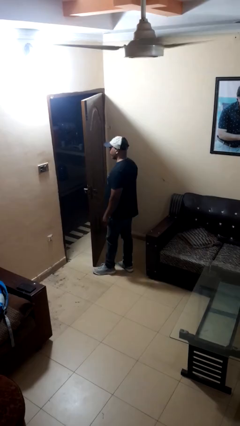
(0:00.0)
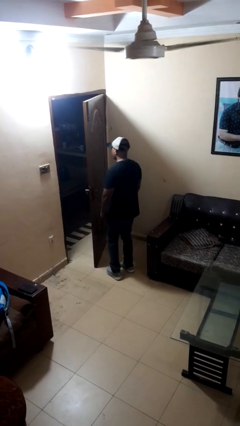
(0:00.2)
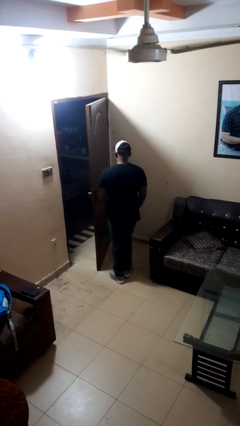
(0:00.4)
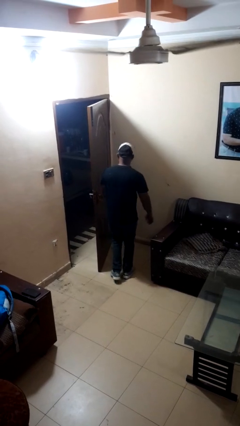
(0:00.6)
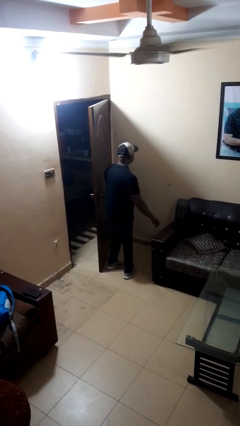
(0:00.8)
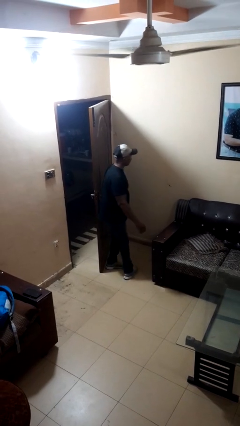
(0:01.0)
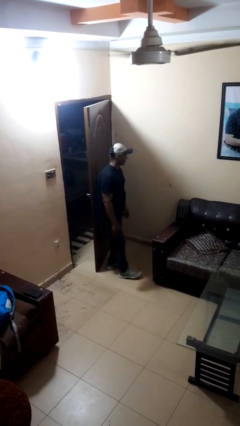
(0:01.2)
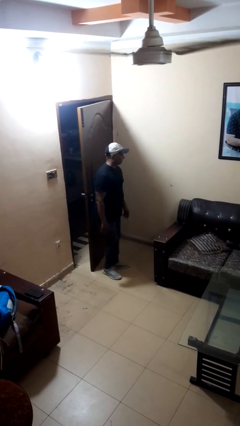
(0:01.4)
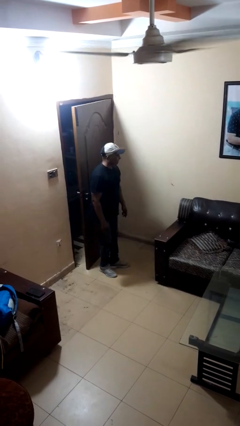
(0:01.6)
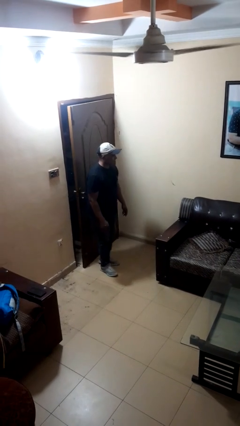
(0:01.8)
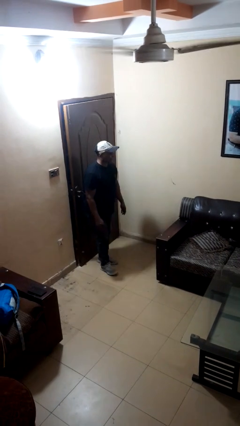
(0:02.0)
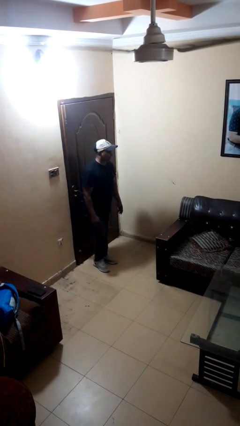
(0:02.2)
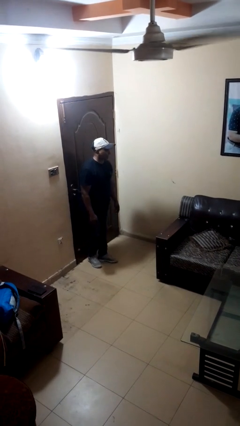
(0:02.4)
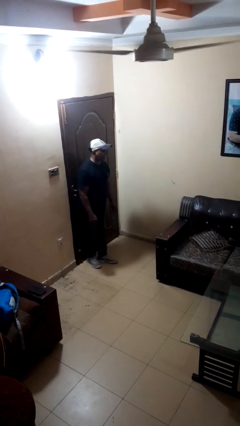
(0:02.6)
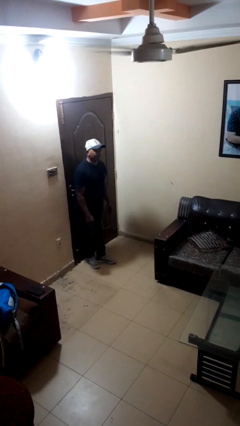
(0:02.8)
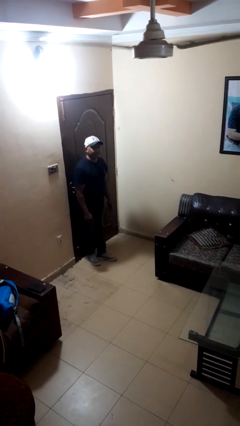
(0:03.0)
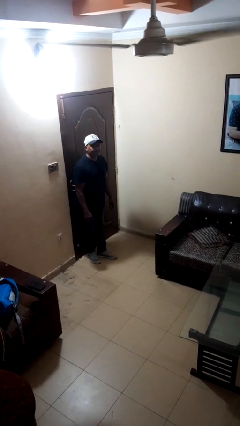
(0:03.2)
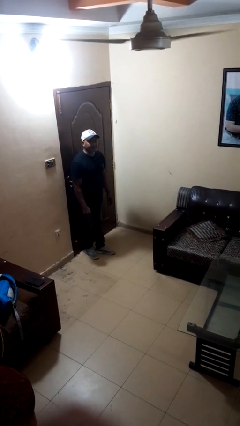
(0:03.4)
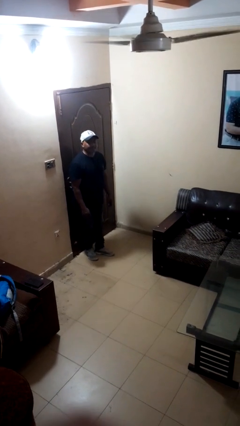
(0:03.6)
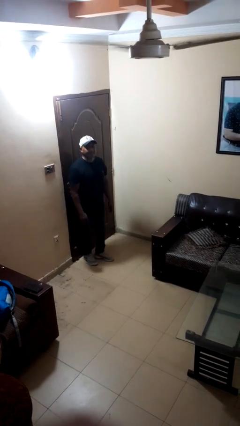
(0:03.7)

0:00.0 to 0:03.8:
person closes door with hip

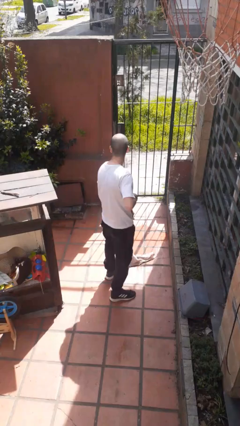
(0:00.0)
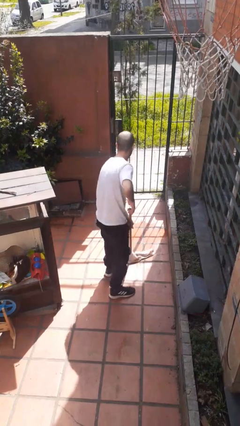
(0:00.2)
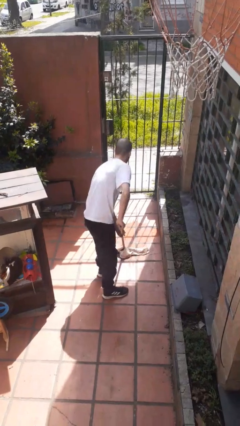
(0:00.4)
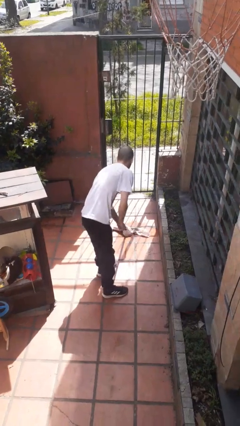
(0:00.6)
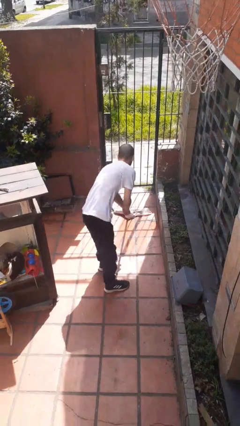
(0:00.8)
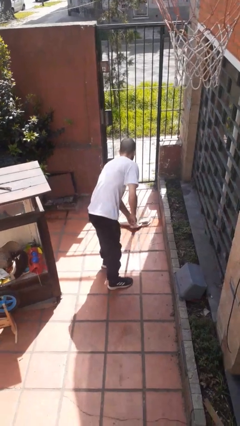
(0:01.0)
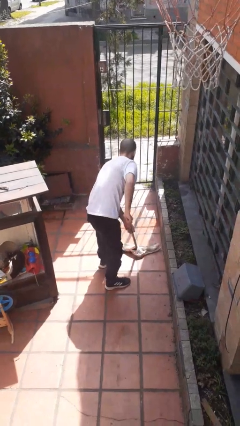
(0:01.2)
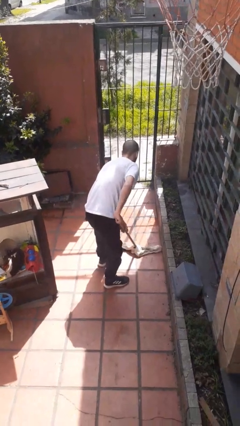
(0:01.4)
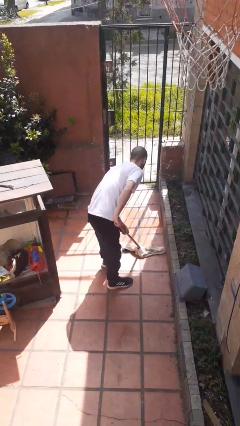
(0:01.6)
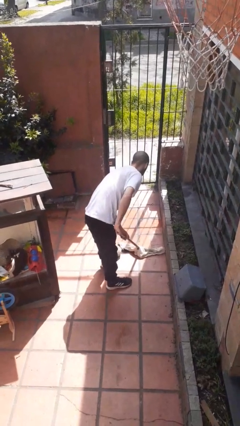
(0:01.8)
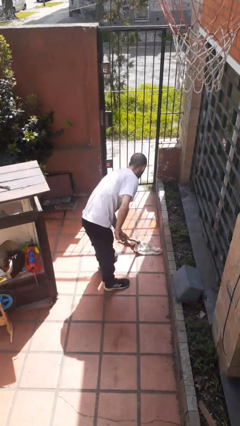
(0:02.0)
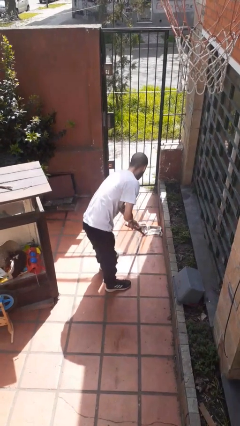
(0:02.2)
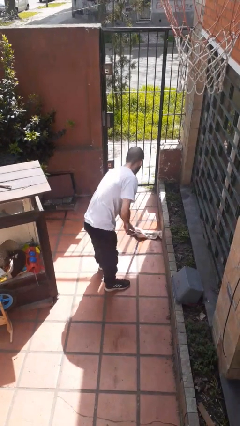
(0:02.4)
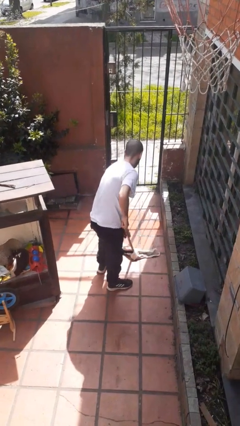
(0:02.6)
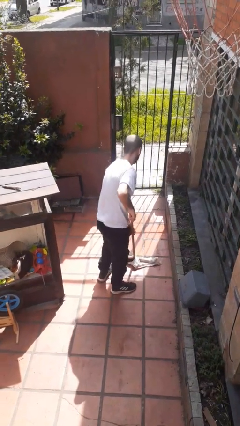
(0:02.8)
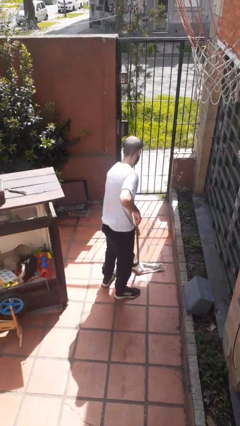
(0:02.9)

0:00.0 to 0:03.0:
person mops

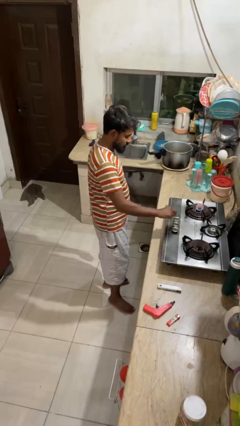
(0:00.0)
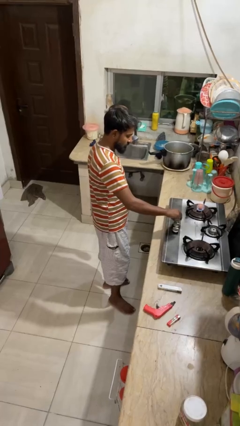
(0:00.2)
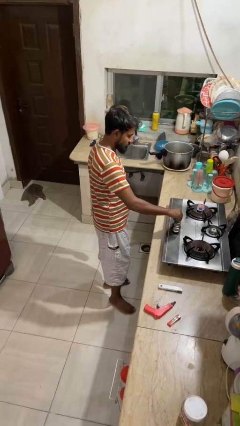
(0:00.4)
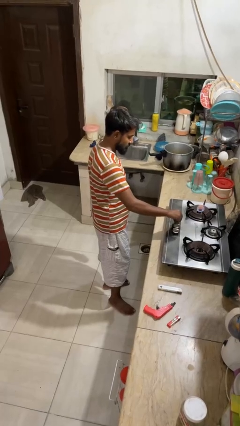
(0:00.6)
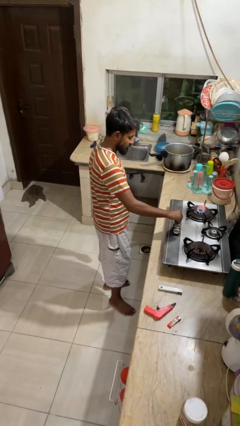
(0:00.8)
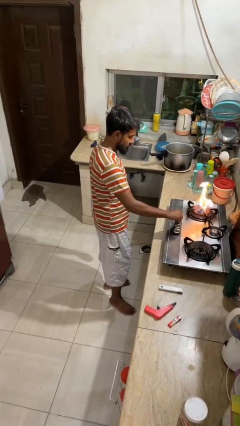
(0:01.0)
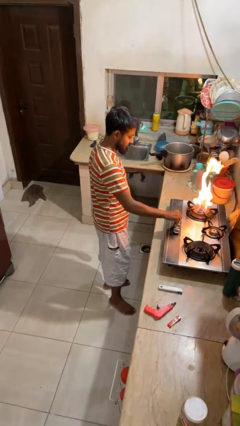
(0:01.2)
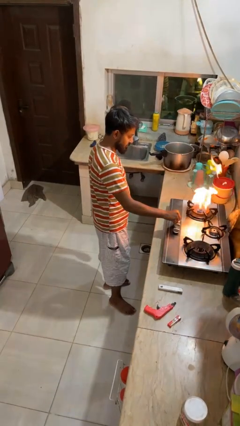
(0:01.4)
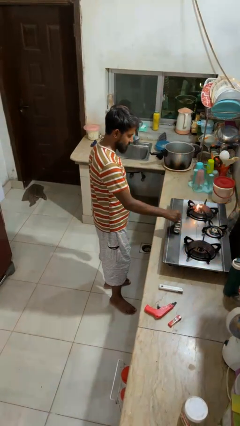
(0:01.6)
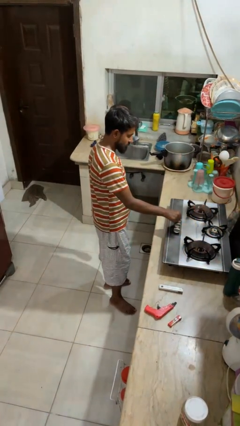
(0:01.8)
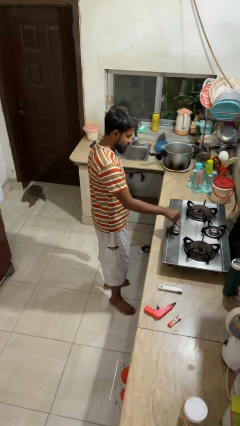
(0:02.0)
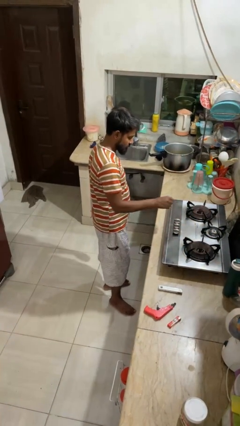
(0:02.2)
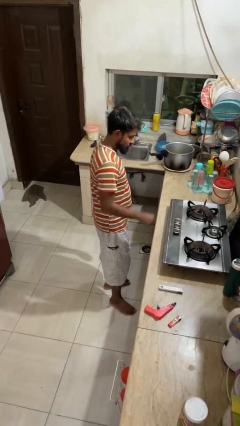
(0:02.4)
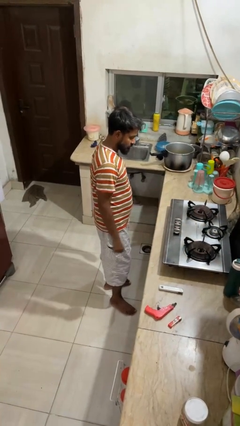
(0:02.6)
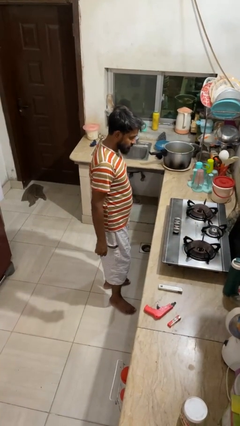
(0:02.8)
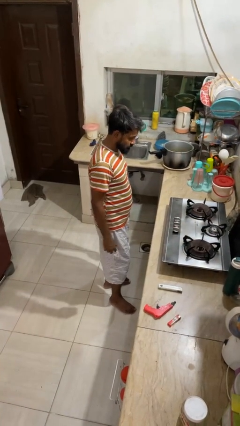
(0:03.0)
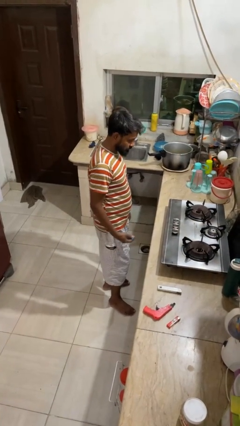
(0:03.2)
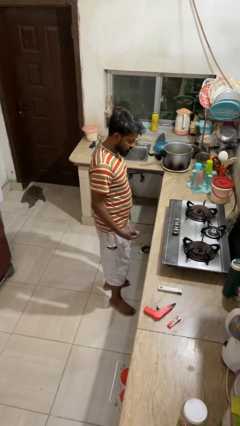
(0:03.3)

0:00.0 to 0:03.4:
person turns off stovetop

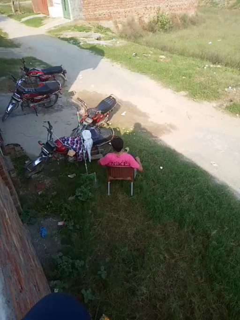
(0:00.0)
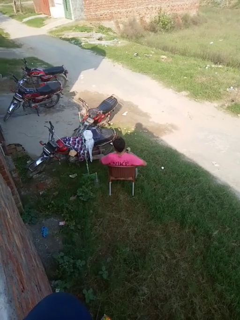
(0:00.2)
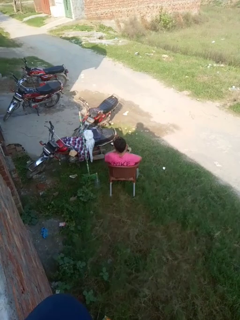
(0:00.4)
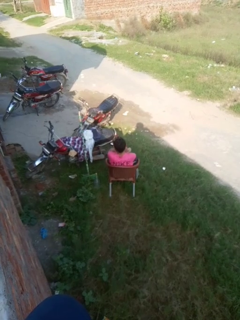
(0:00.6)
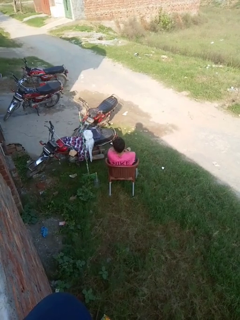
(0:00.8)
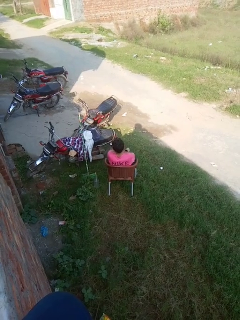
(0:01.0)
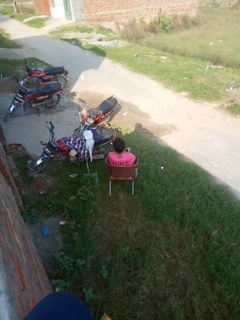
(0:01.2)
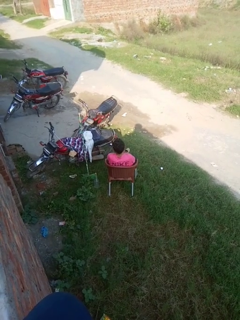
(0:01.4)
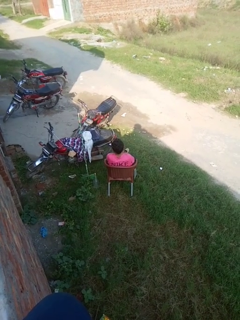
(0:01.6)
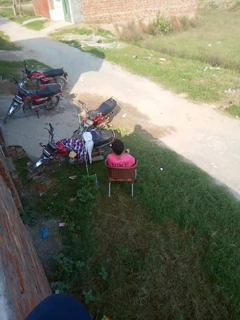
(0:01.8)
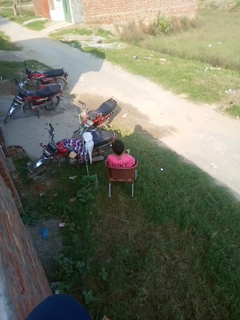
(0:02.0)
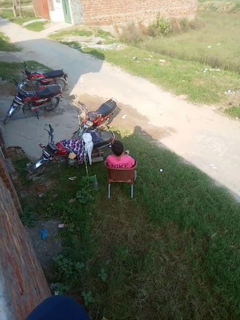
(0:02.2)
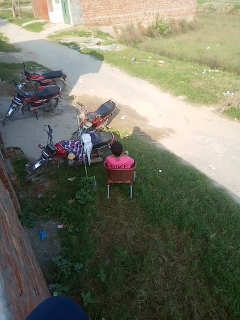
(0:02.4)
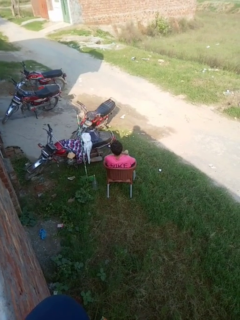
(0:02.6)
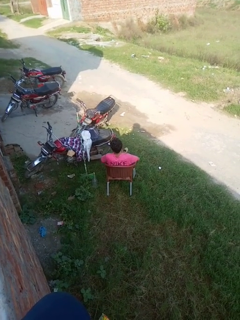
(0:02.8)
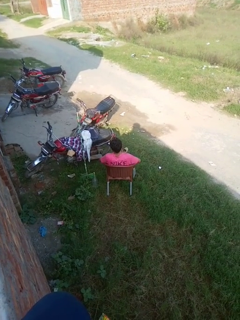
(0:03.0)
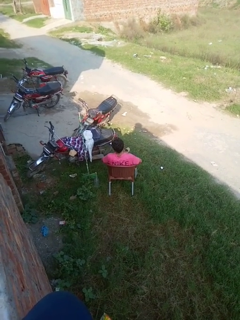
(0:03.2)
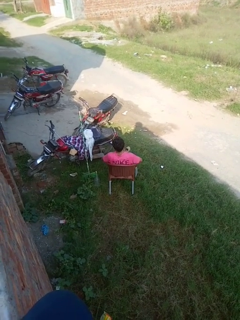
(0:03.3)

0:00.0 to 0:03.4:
person crosses arms

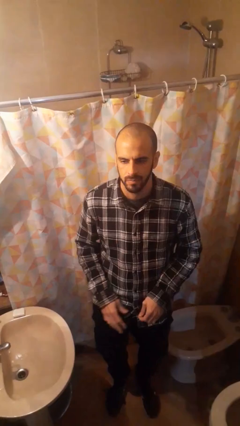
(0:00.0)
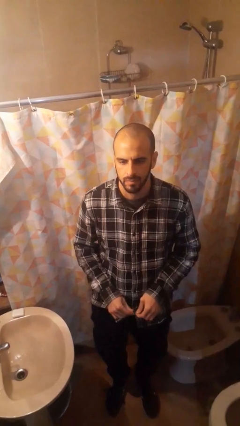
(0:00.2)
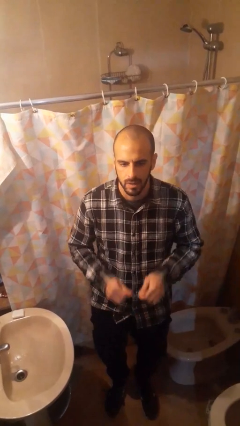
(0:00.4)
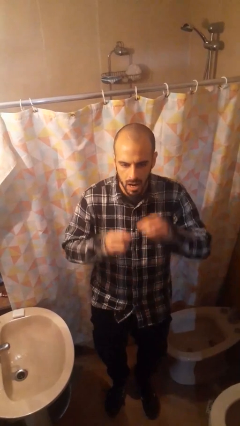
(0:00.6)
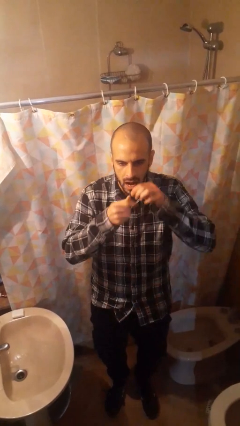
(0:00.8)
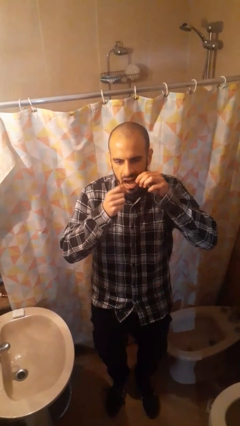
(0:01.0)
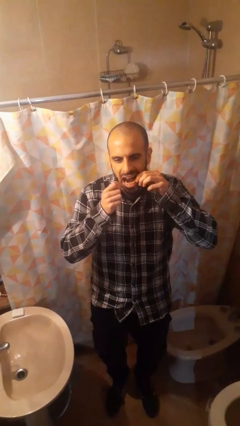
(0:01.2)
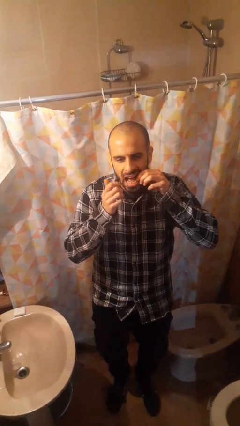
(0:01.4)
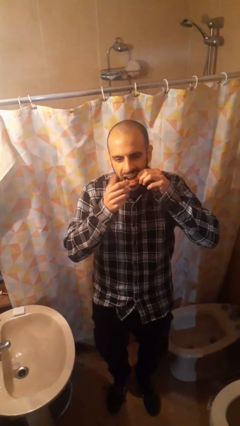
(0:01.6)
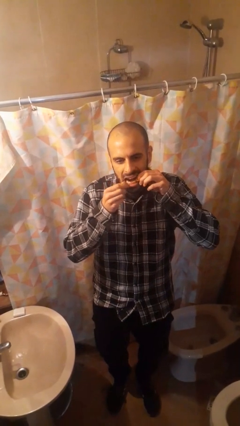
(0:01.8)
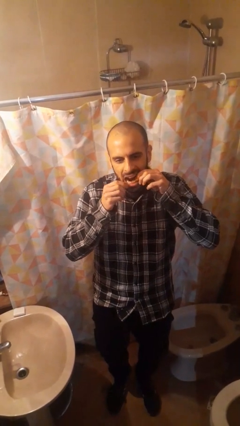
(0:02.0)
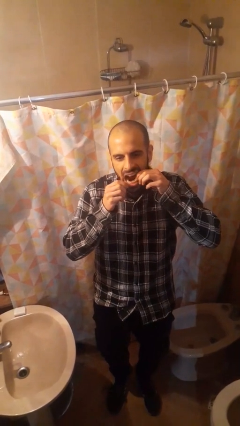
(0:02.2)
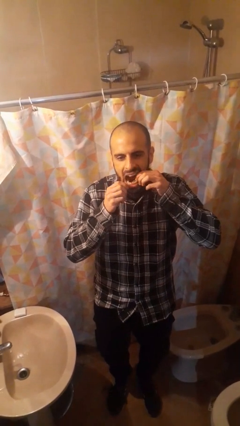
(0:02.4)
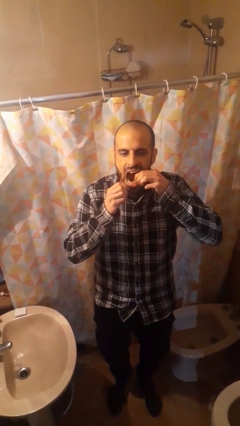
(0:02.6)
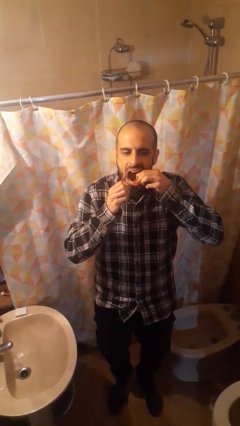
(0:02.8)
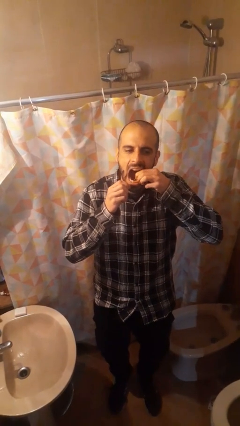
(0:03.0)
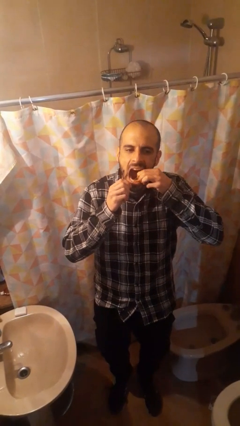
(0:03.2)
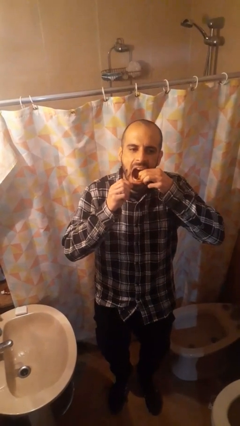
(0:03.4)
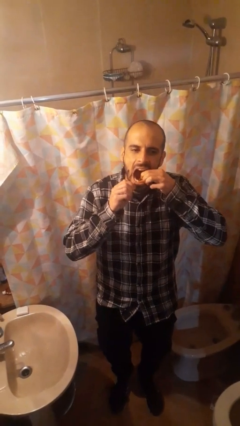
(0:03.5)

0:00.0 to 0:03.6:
person flosses

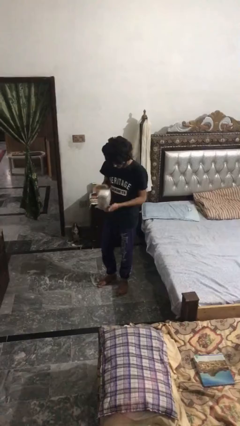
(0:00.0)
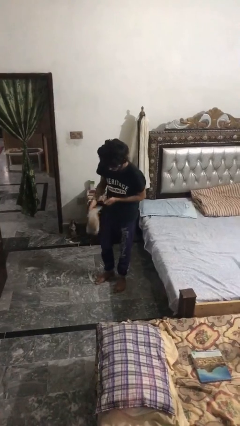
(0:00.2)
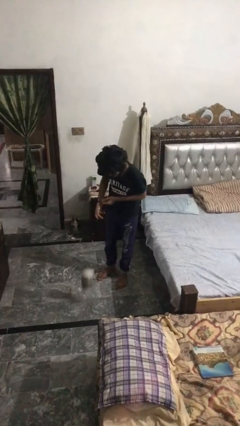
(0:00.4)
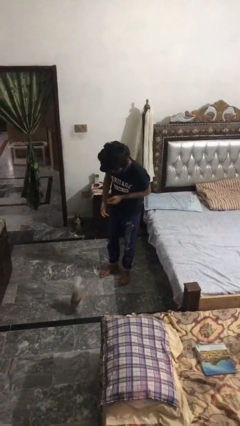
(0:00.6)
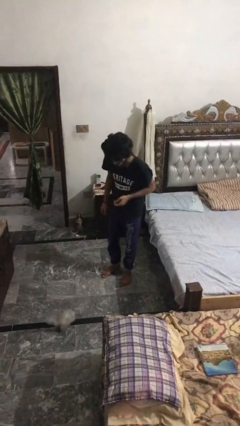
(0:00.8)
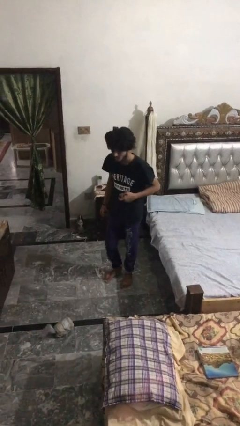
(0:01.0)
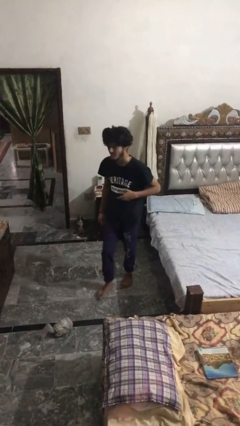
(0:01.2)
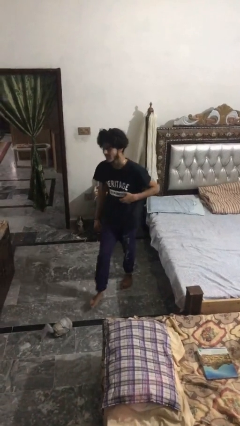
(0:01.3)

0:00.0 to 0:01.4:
person drops object
